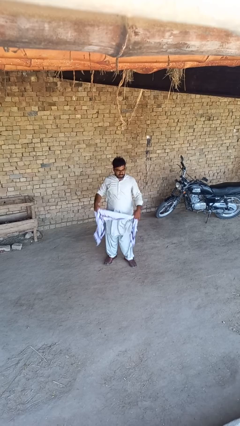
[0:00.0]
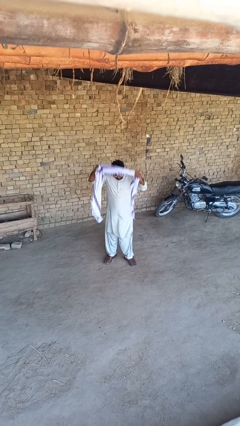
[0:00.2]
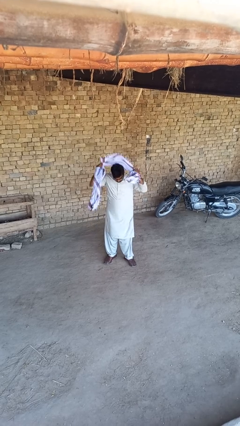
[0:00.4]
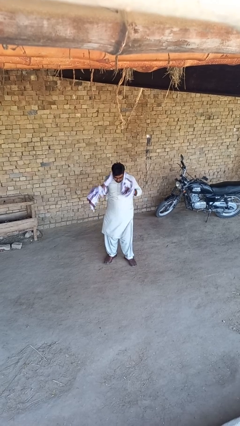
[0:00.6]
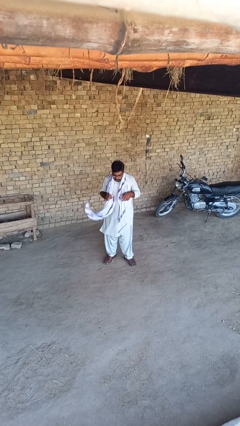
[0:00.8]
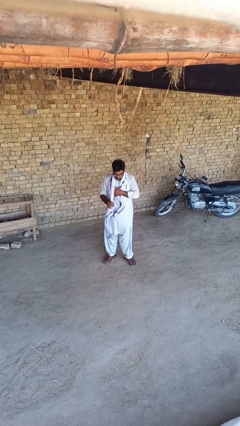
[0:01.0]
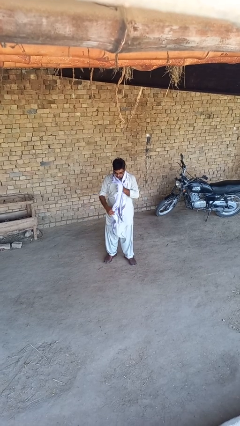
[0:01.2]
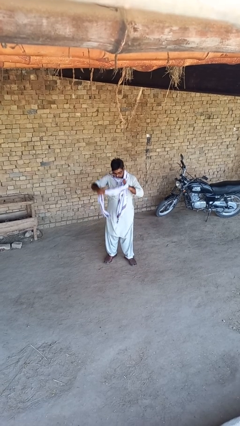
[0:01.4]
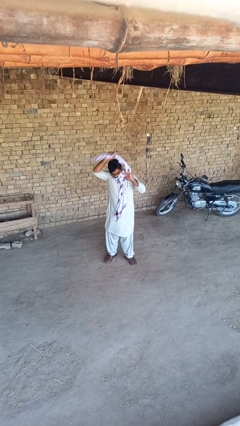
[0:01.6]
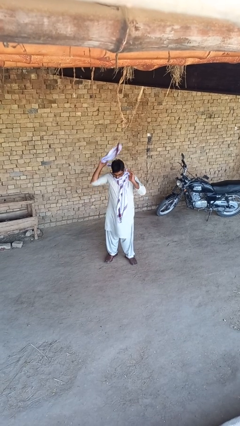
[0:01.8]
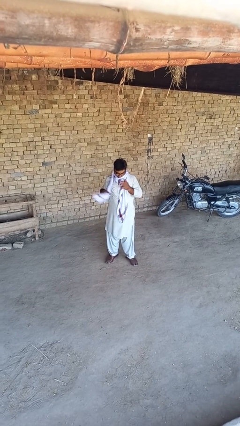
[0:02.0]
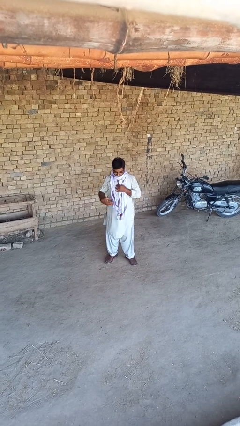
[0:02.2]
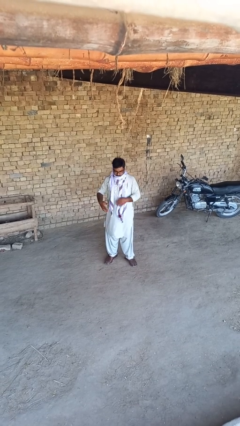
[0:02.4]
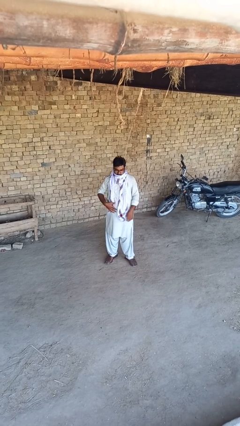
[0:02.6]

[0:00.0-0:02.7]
person puts on scarf

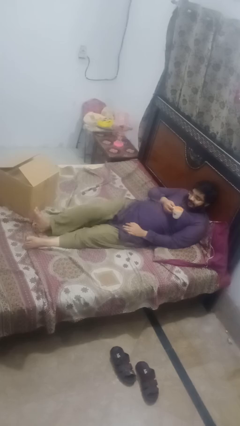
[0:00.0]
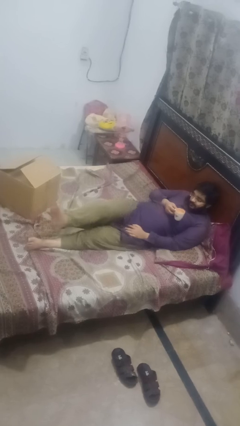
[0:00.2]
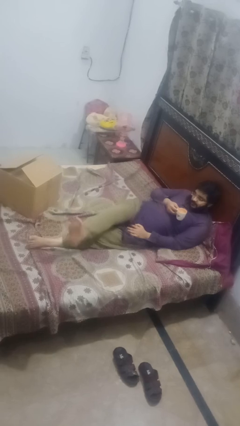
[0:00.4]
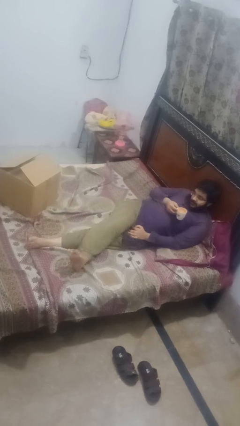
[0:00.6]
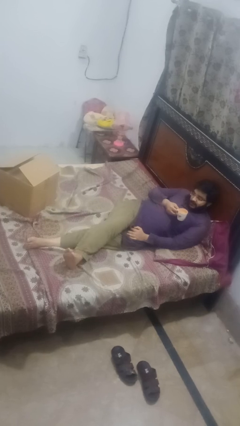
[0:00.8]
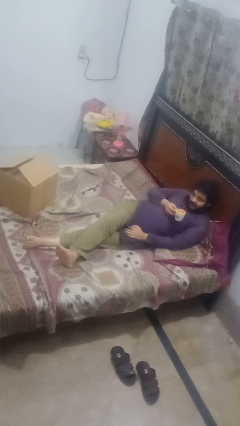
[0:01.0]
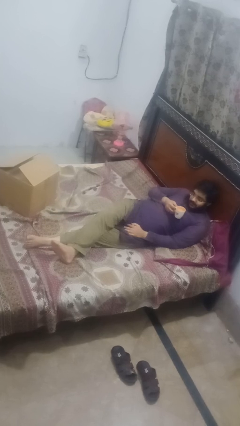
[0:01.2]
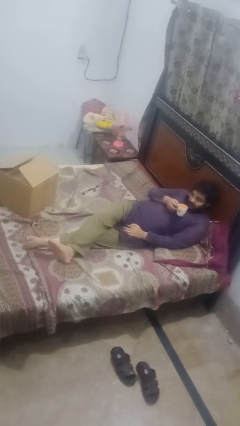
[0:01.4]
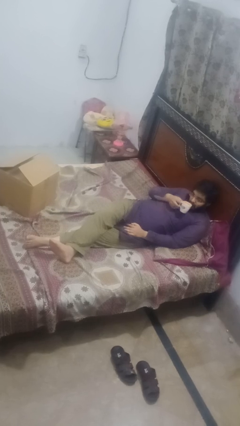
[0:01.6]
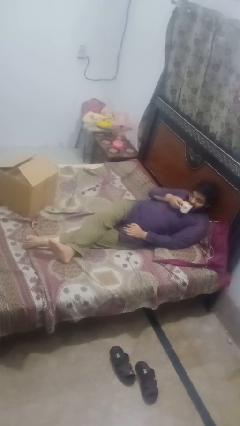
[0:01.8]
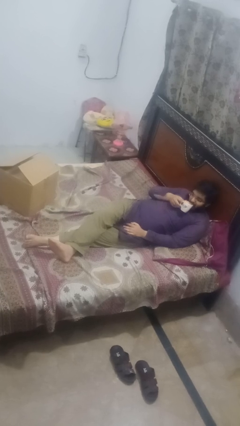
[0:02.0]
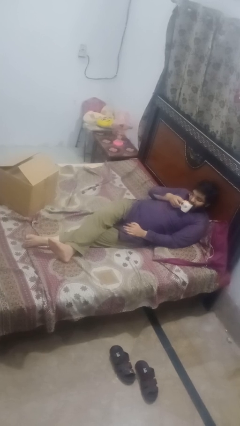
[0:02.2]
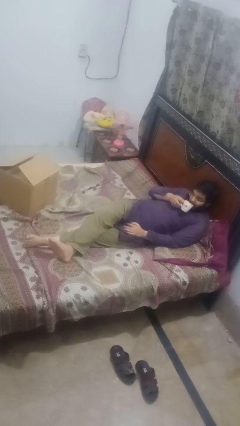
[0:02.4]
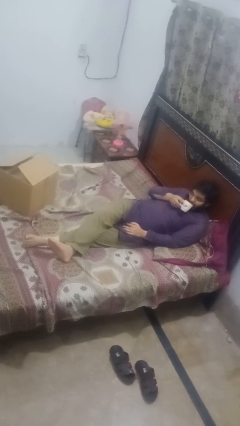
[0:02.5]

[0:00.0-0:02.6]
person crosses legs

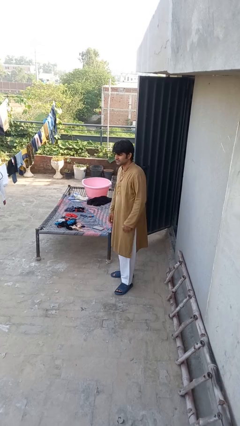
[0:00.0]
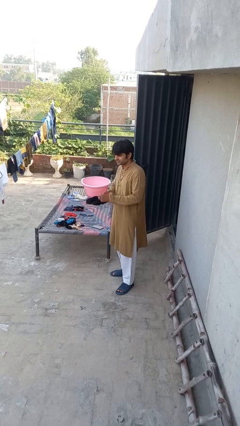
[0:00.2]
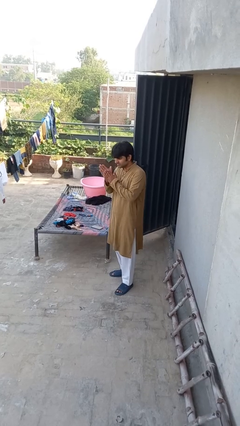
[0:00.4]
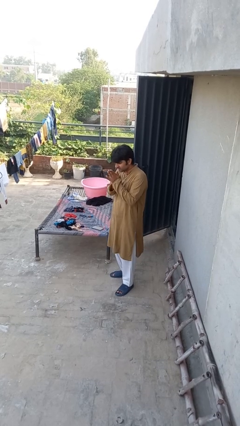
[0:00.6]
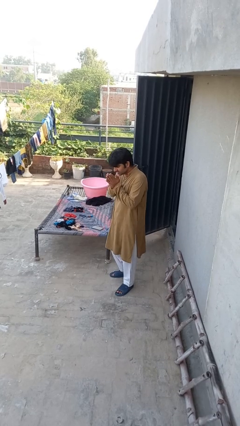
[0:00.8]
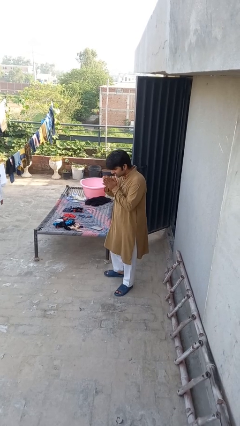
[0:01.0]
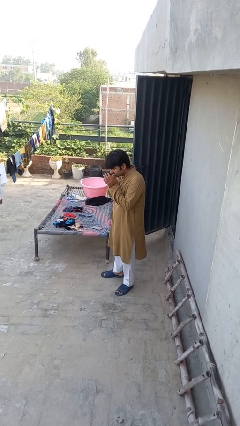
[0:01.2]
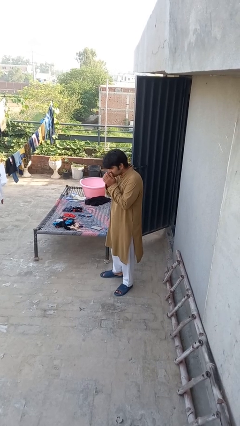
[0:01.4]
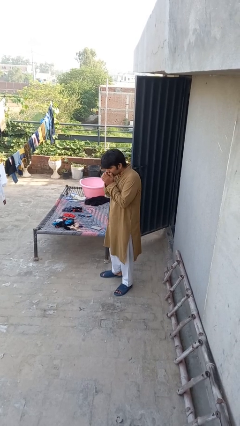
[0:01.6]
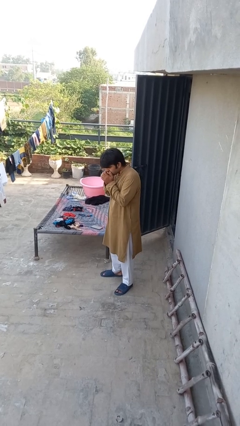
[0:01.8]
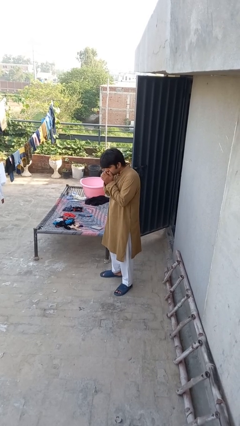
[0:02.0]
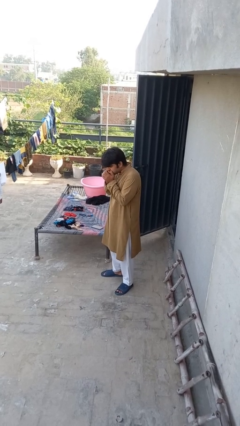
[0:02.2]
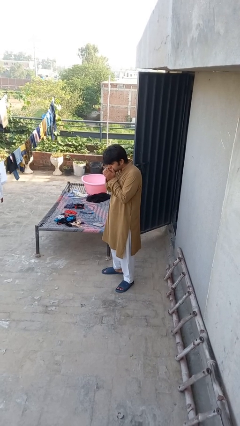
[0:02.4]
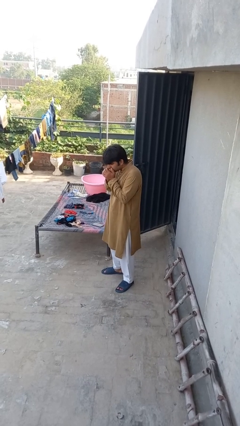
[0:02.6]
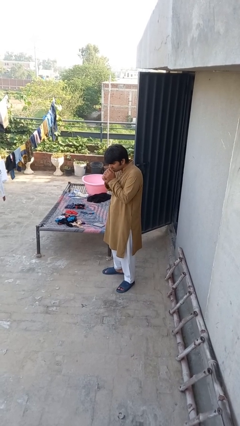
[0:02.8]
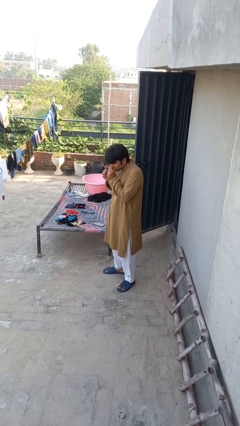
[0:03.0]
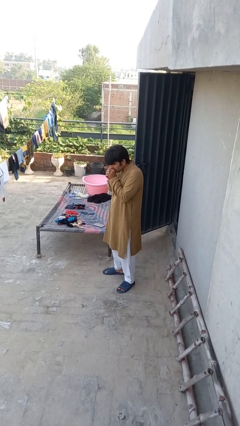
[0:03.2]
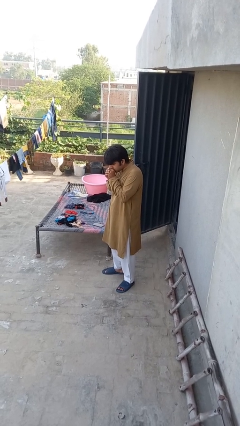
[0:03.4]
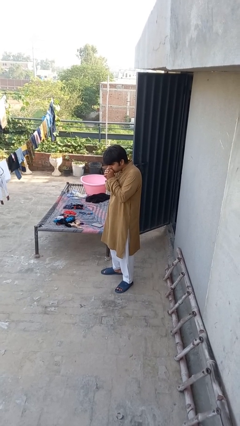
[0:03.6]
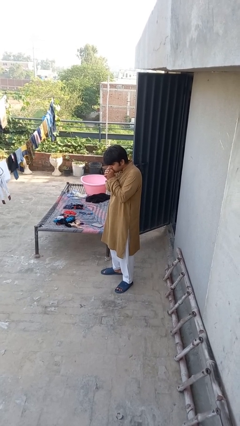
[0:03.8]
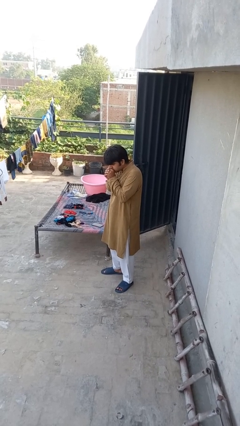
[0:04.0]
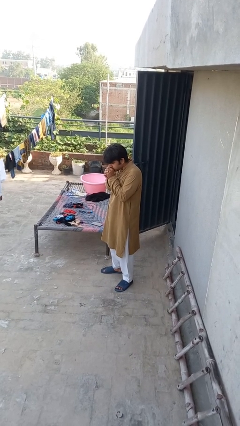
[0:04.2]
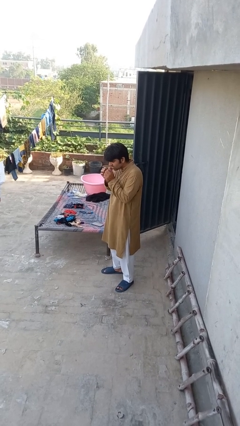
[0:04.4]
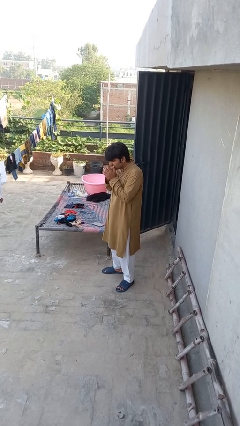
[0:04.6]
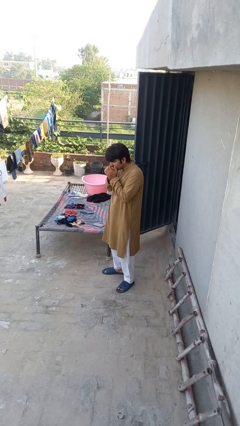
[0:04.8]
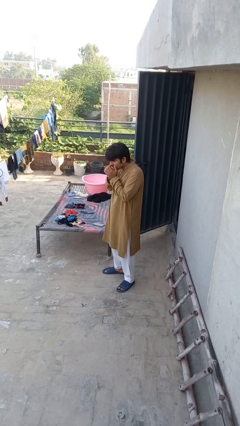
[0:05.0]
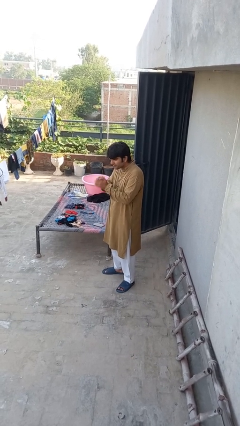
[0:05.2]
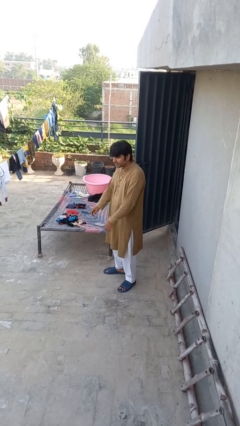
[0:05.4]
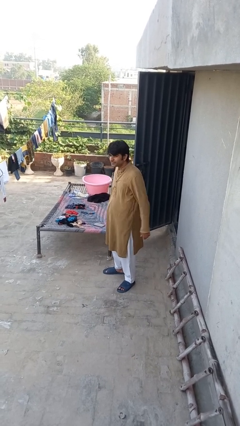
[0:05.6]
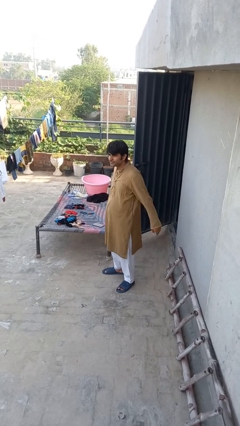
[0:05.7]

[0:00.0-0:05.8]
person blows into hands

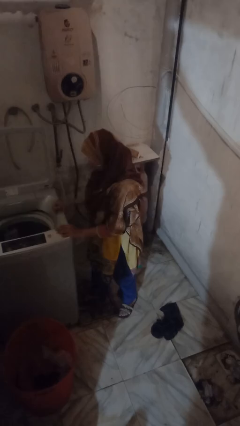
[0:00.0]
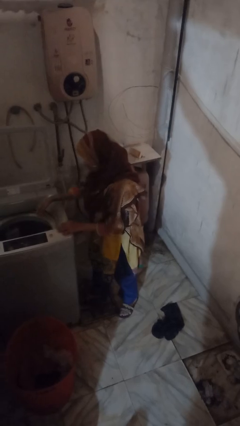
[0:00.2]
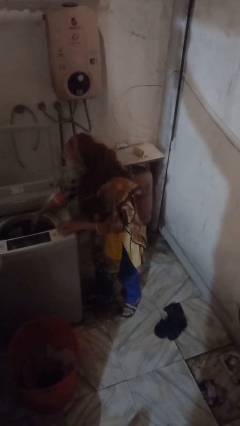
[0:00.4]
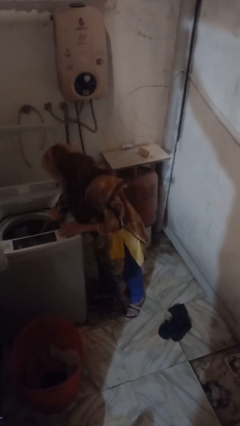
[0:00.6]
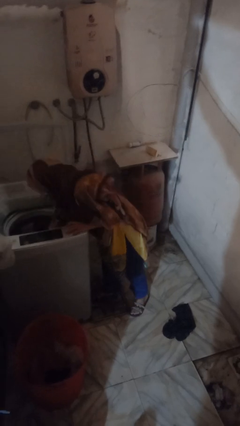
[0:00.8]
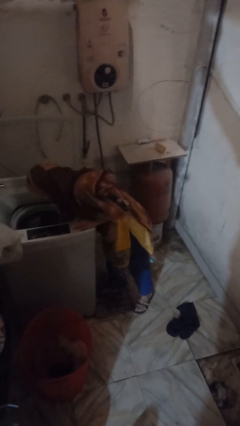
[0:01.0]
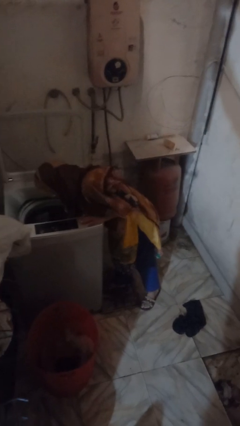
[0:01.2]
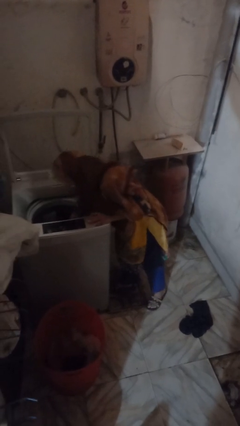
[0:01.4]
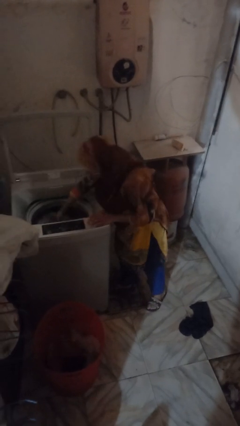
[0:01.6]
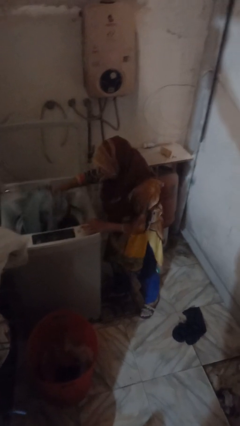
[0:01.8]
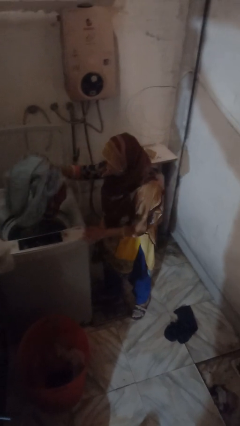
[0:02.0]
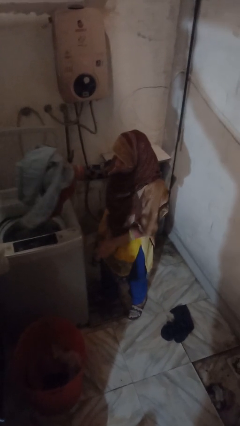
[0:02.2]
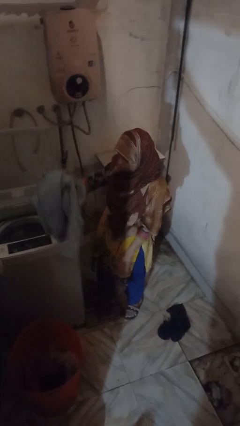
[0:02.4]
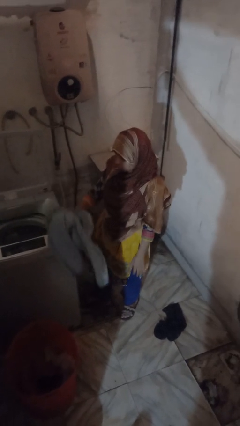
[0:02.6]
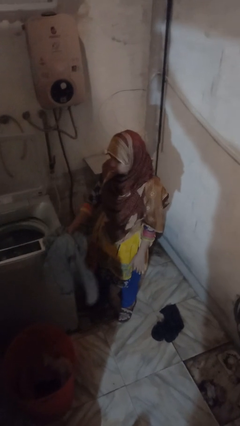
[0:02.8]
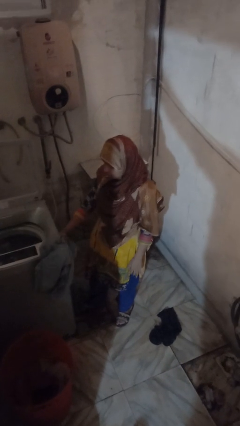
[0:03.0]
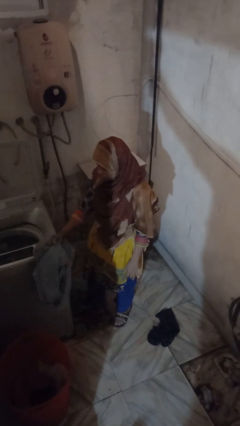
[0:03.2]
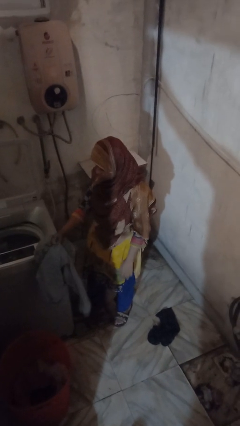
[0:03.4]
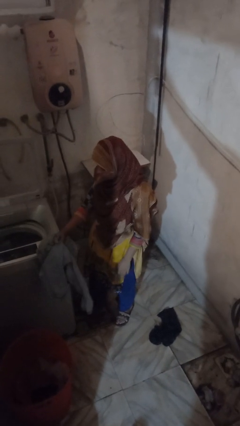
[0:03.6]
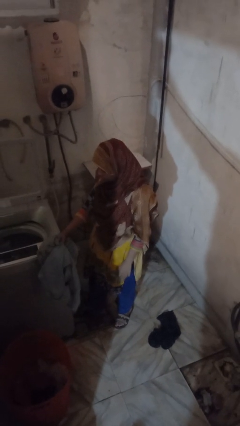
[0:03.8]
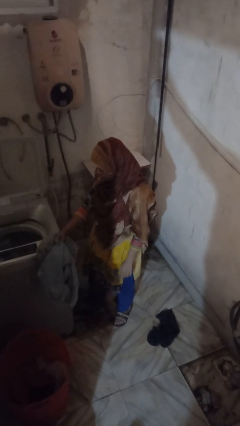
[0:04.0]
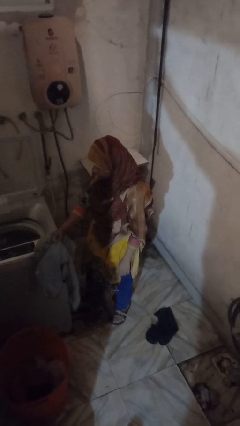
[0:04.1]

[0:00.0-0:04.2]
person unloads dryer

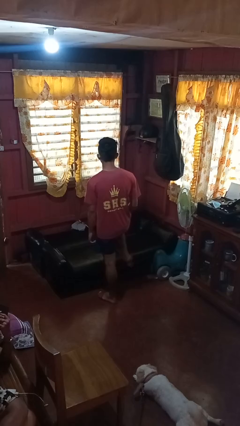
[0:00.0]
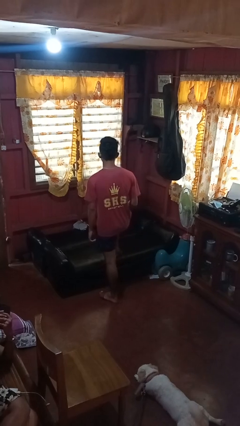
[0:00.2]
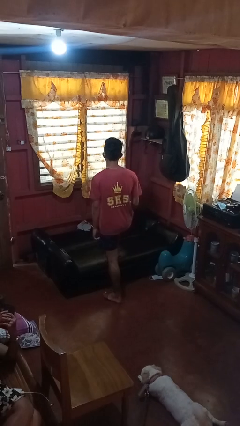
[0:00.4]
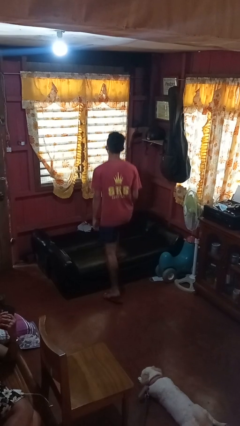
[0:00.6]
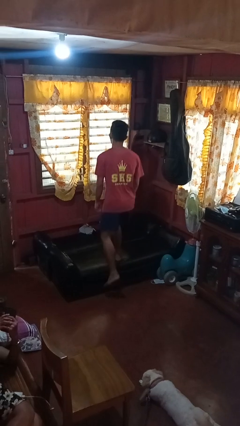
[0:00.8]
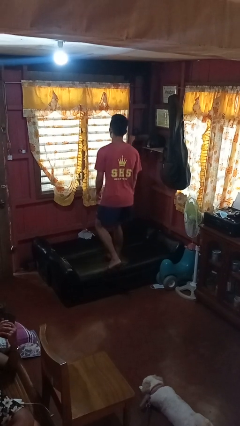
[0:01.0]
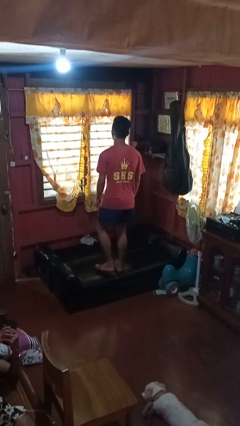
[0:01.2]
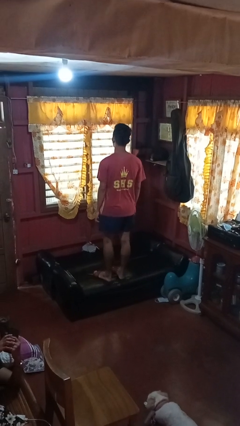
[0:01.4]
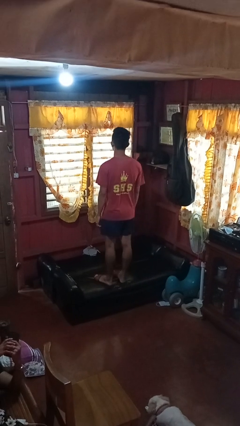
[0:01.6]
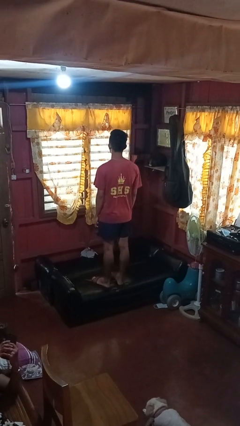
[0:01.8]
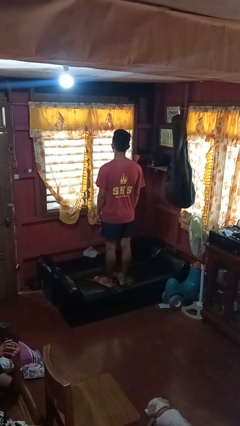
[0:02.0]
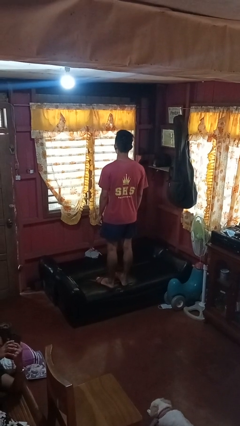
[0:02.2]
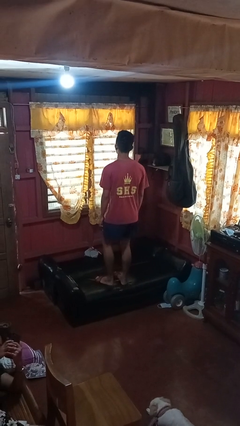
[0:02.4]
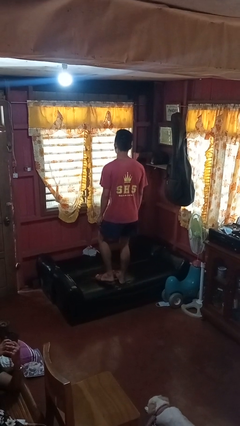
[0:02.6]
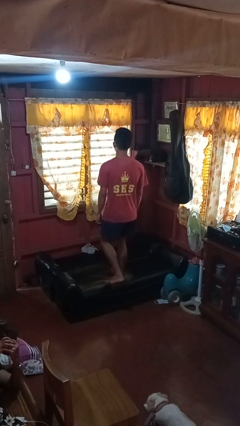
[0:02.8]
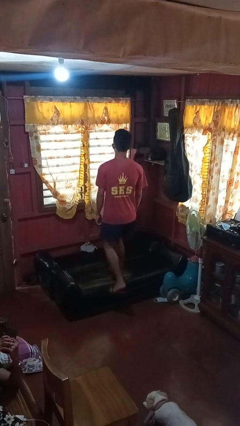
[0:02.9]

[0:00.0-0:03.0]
person climbs on couch
